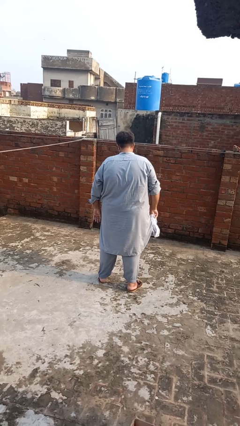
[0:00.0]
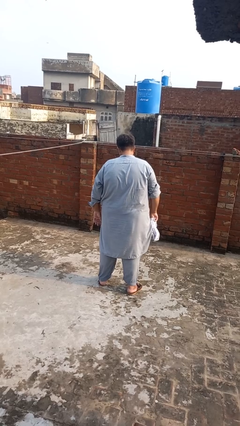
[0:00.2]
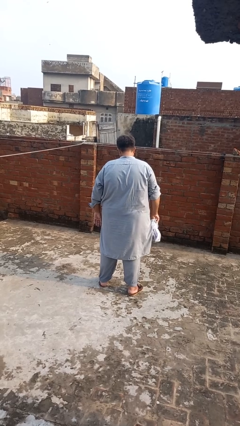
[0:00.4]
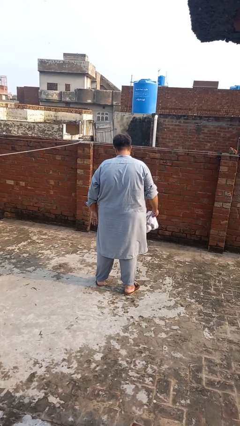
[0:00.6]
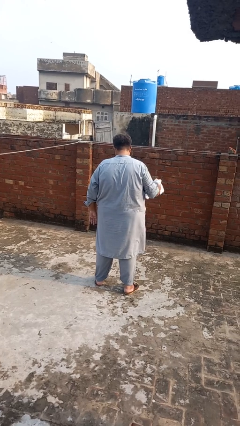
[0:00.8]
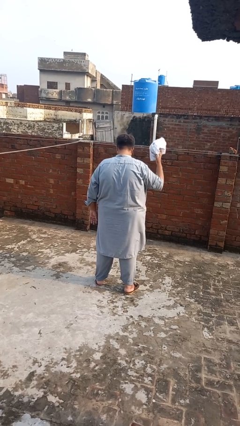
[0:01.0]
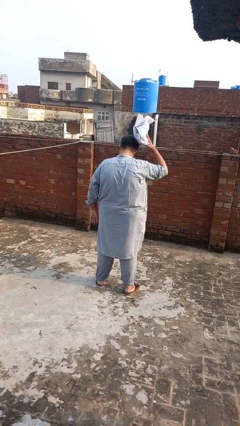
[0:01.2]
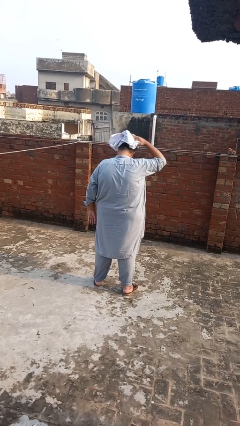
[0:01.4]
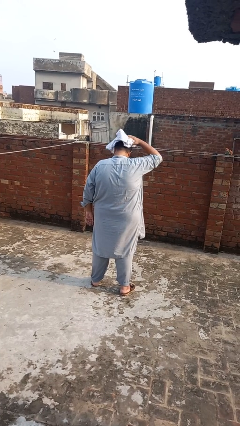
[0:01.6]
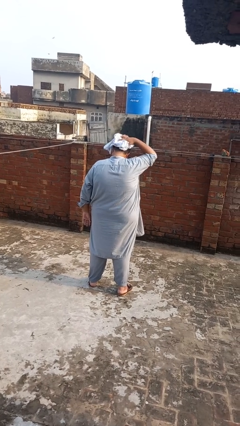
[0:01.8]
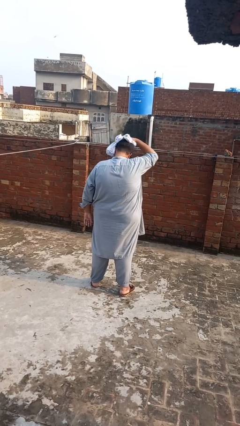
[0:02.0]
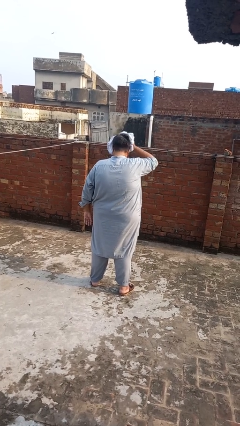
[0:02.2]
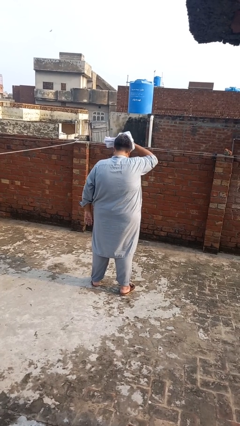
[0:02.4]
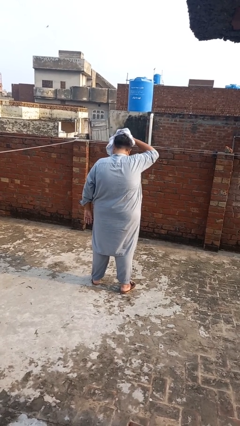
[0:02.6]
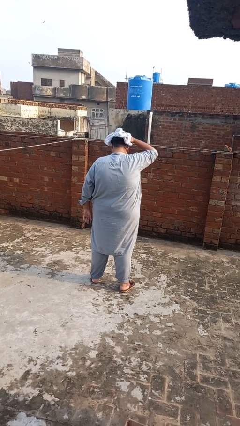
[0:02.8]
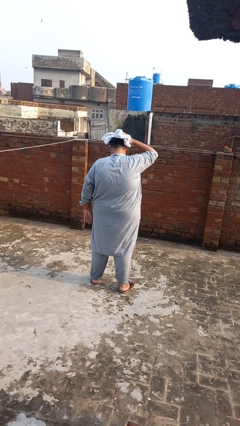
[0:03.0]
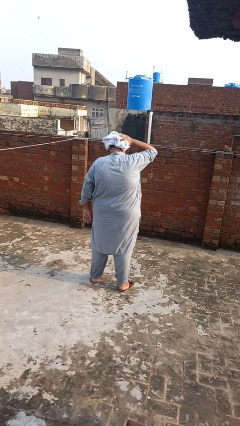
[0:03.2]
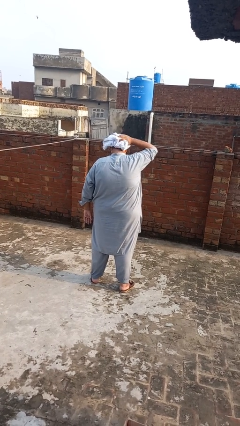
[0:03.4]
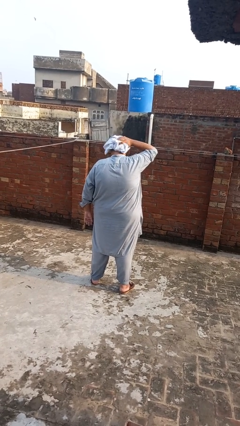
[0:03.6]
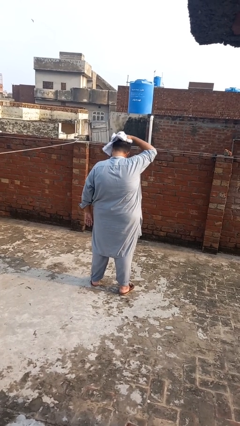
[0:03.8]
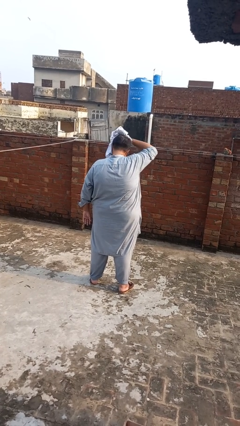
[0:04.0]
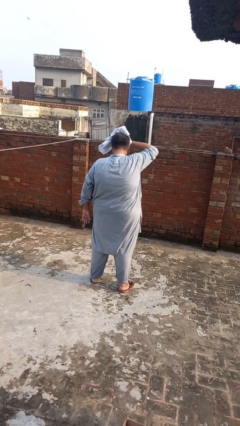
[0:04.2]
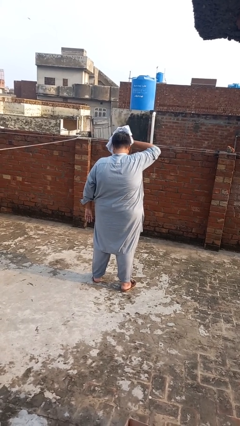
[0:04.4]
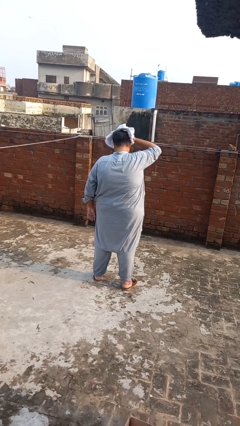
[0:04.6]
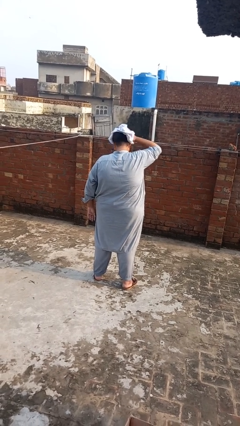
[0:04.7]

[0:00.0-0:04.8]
person dries hair with towel

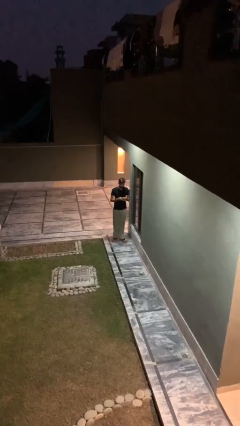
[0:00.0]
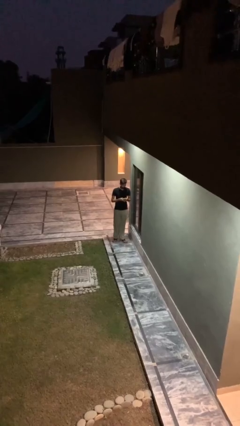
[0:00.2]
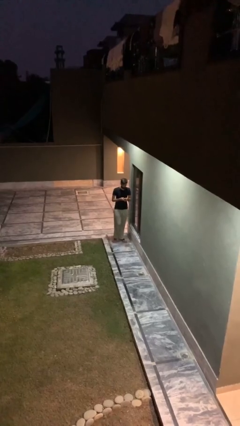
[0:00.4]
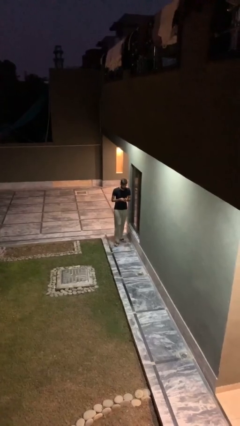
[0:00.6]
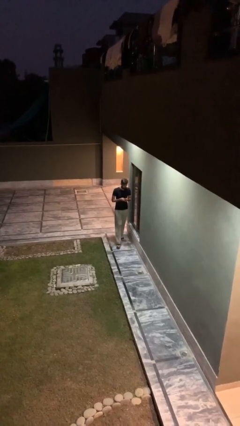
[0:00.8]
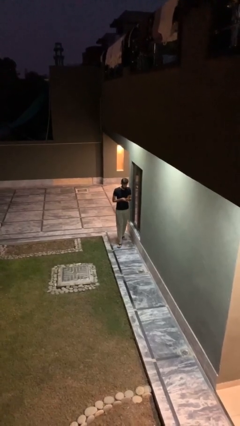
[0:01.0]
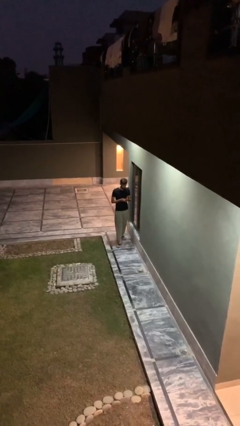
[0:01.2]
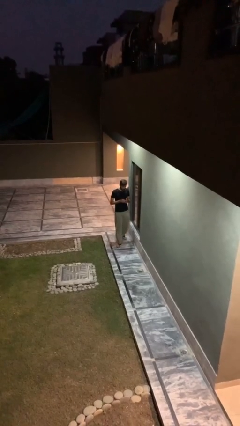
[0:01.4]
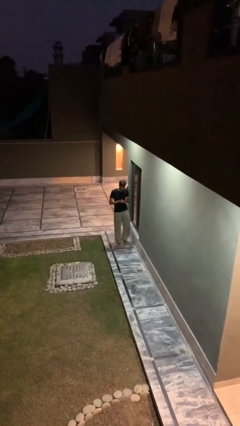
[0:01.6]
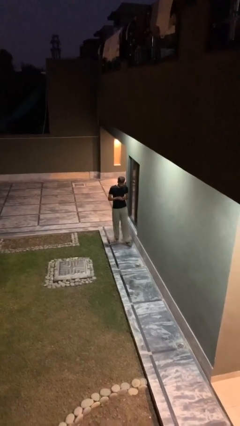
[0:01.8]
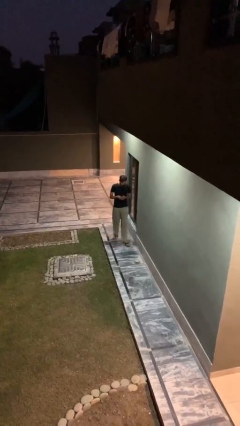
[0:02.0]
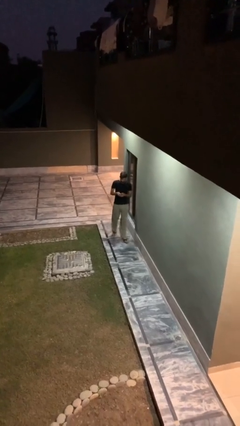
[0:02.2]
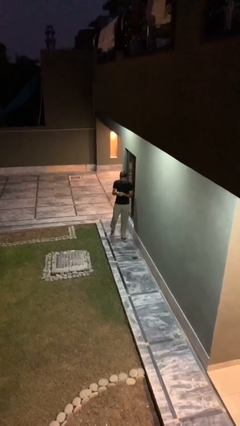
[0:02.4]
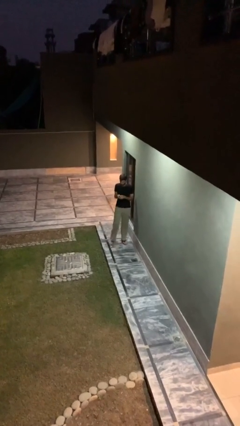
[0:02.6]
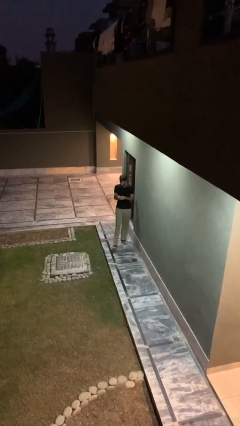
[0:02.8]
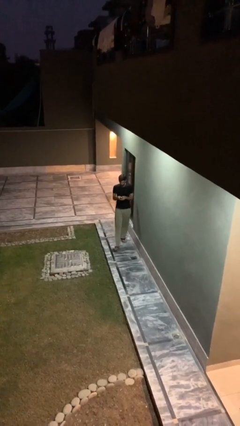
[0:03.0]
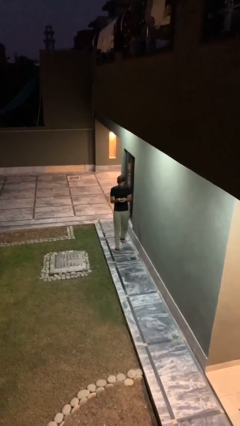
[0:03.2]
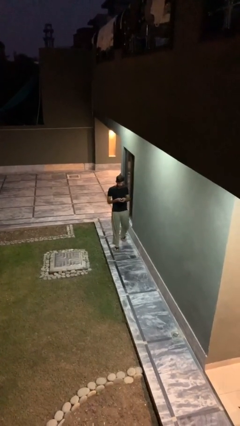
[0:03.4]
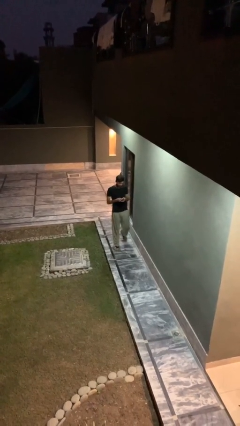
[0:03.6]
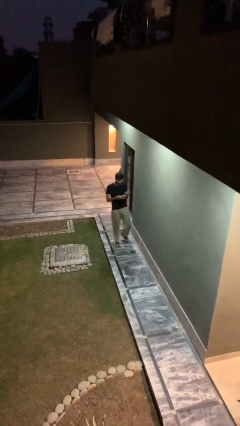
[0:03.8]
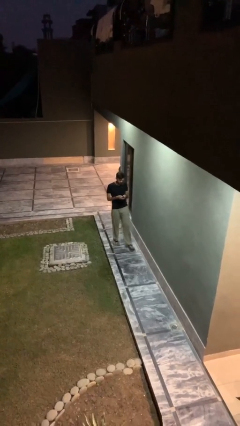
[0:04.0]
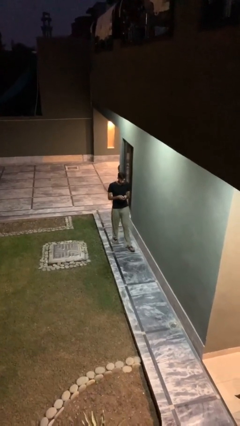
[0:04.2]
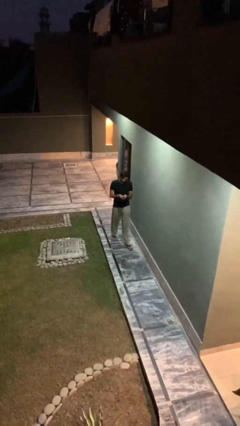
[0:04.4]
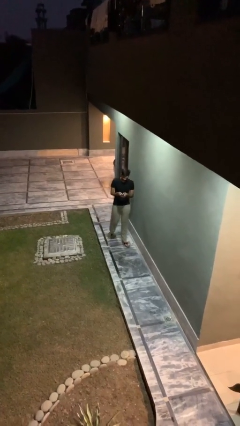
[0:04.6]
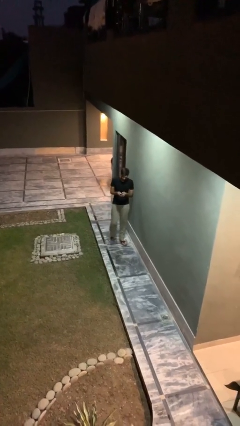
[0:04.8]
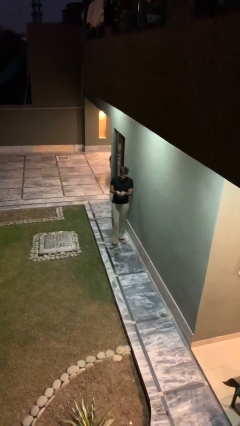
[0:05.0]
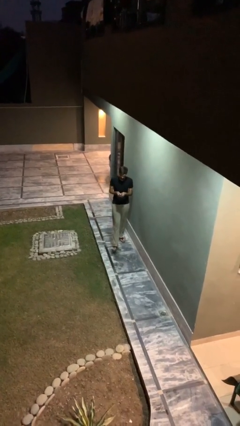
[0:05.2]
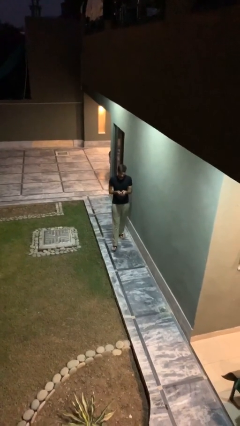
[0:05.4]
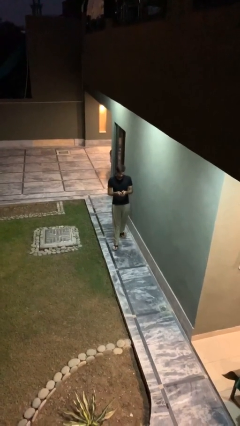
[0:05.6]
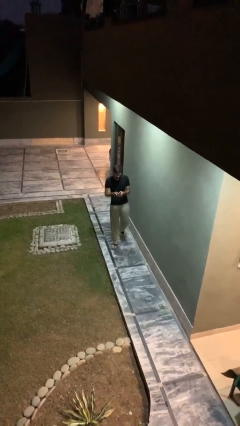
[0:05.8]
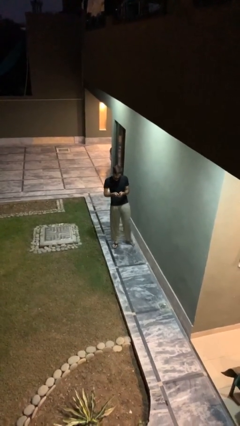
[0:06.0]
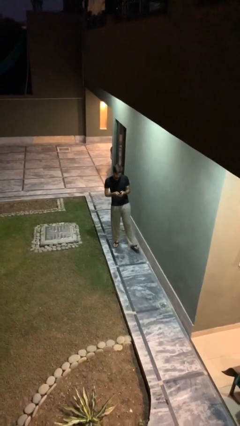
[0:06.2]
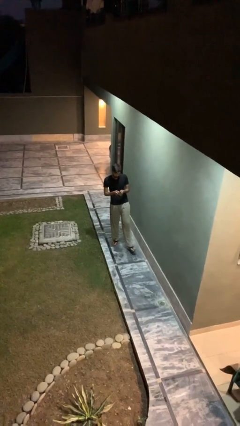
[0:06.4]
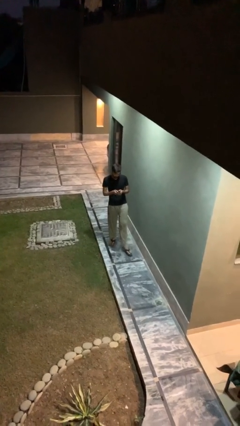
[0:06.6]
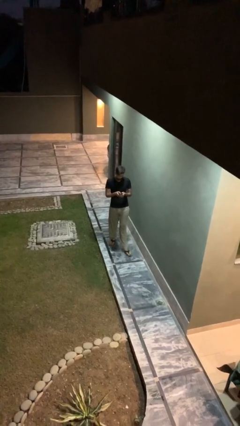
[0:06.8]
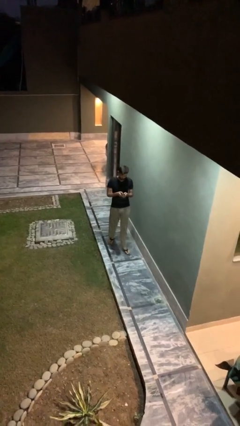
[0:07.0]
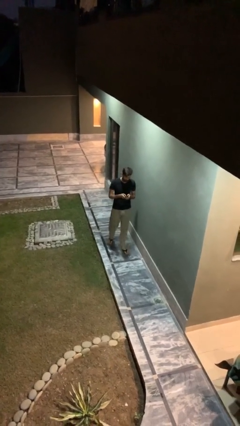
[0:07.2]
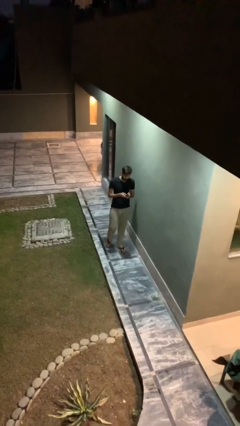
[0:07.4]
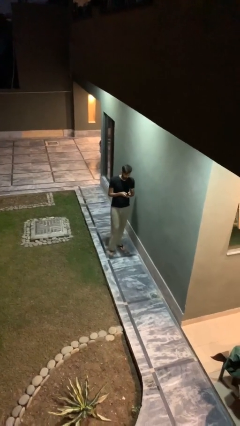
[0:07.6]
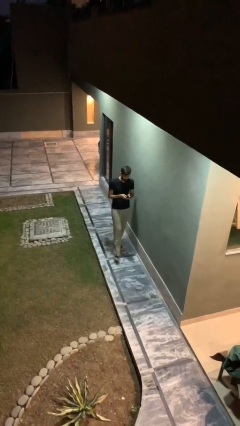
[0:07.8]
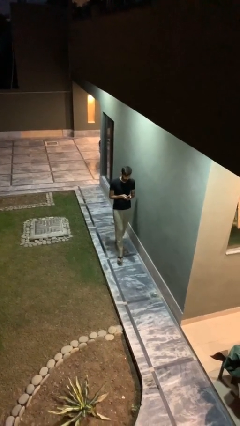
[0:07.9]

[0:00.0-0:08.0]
person texts on phone

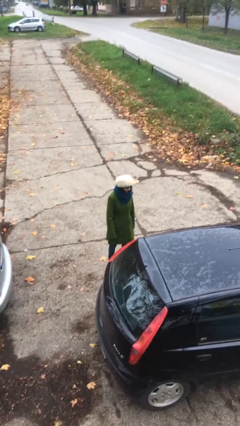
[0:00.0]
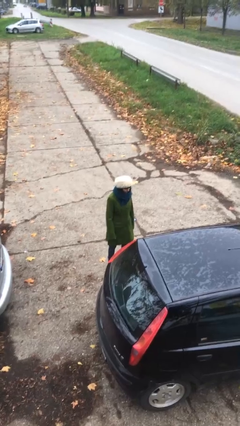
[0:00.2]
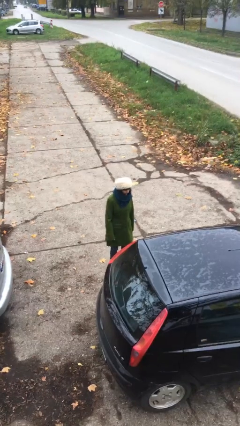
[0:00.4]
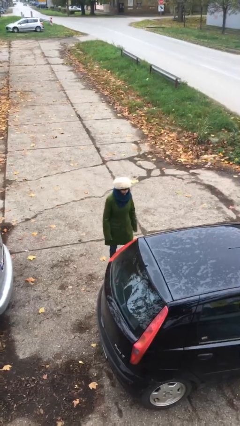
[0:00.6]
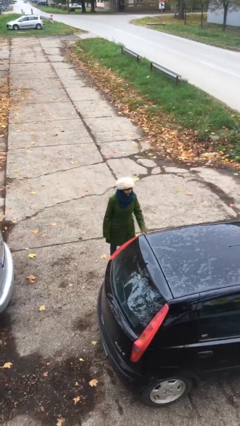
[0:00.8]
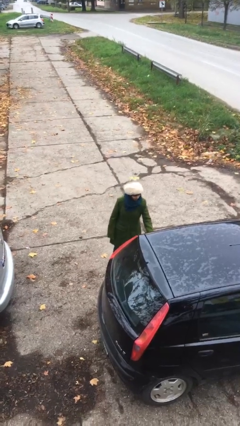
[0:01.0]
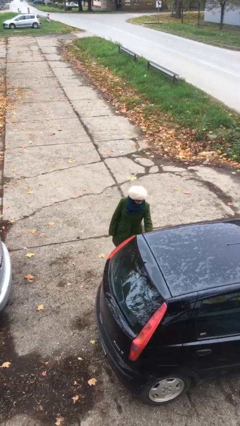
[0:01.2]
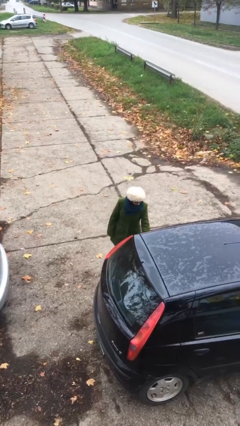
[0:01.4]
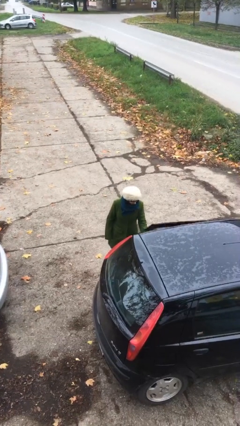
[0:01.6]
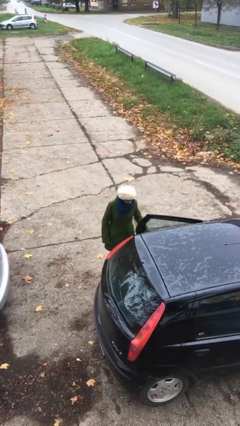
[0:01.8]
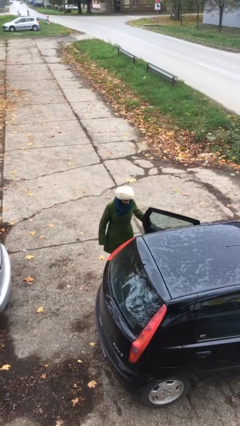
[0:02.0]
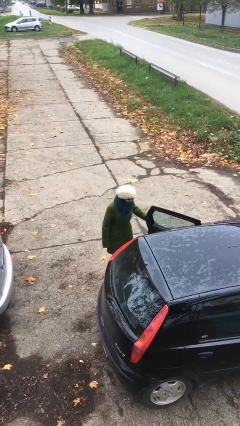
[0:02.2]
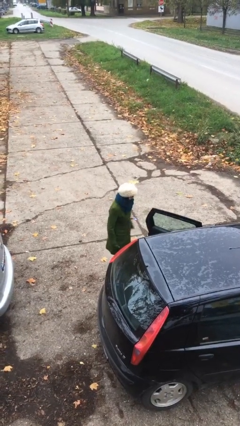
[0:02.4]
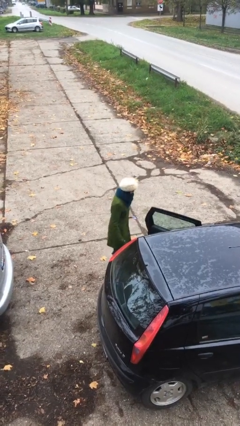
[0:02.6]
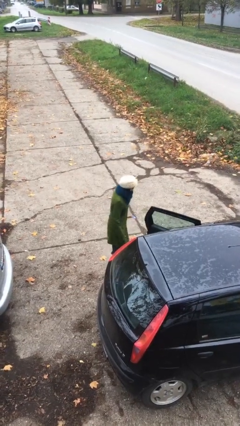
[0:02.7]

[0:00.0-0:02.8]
person opens car door

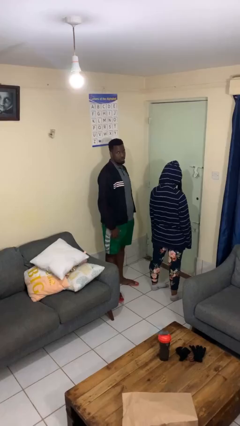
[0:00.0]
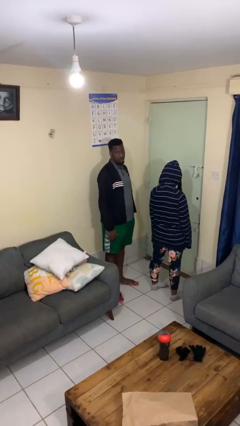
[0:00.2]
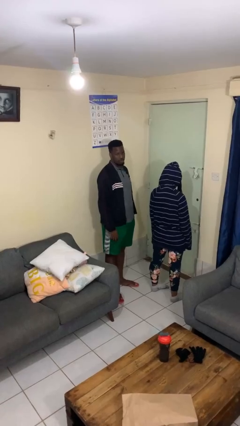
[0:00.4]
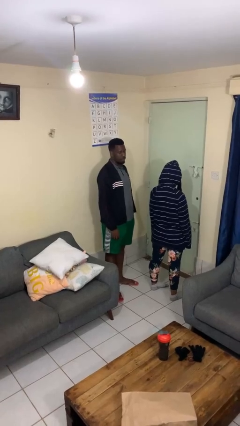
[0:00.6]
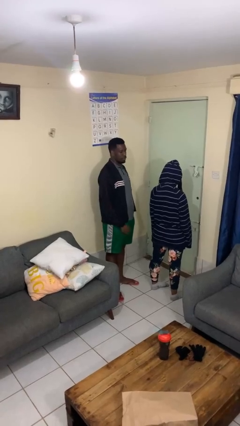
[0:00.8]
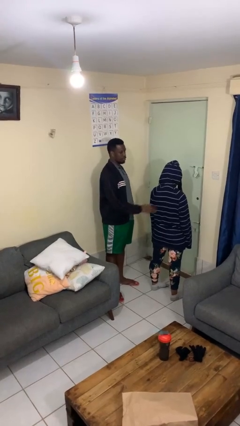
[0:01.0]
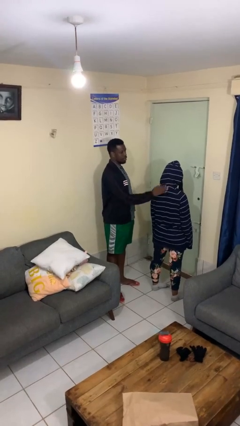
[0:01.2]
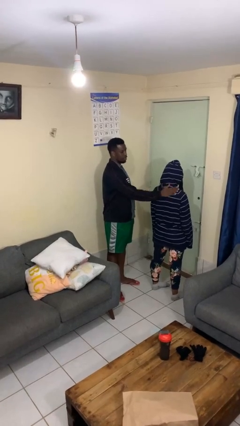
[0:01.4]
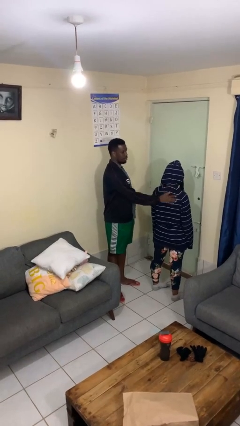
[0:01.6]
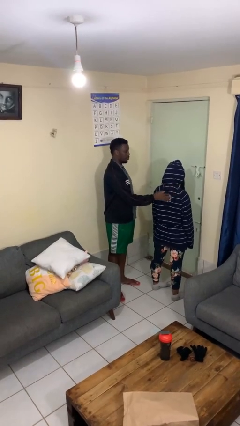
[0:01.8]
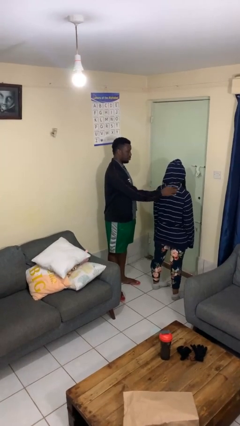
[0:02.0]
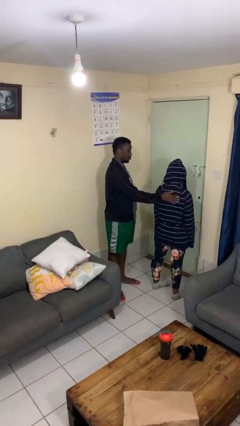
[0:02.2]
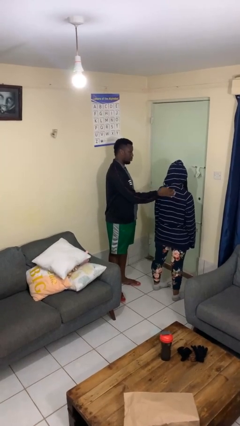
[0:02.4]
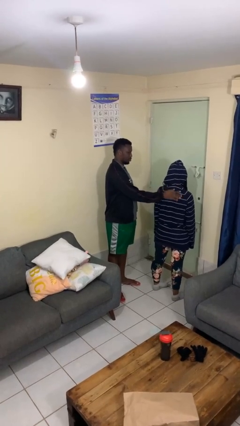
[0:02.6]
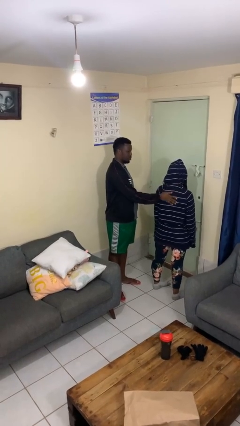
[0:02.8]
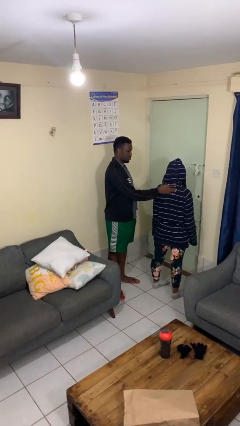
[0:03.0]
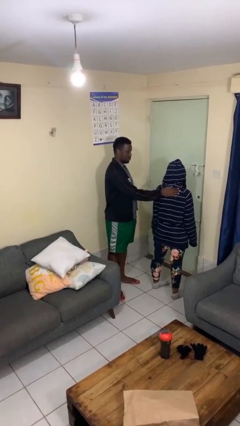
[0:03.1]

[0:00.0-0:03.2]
person touches back of person
